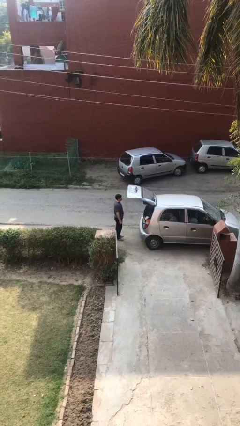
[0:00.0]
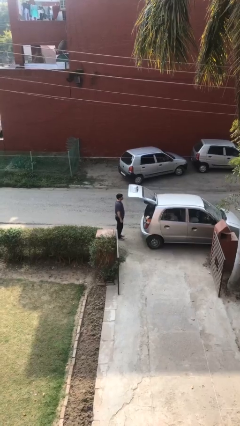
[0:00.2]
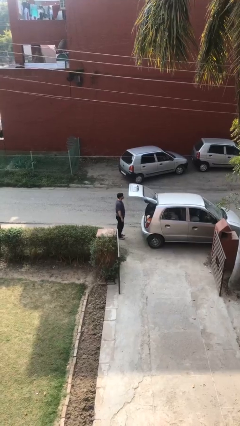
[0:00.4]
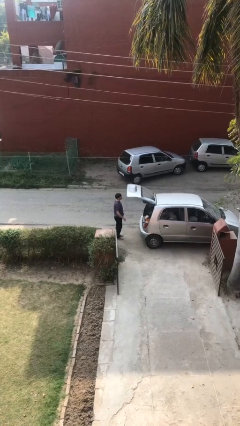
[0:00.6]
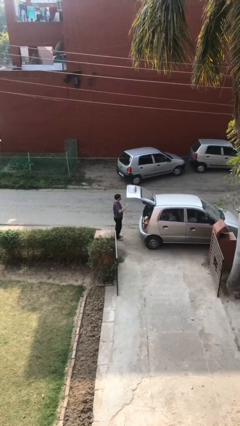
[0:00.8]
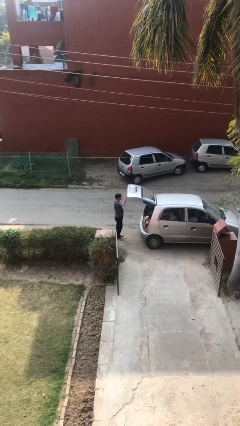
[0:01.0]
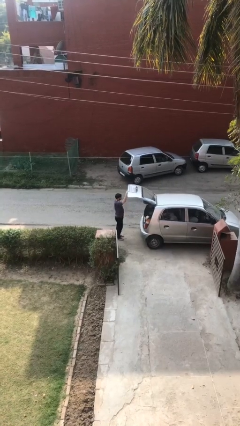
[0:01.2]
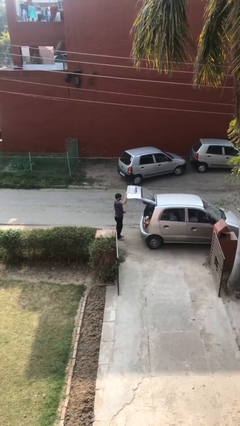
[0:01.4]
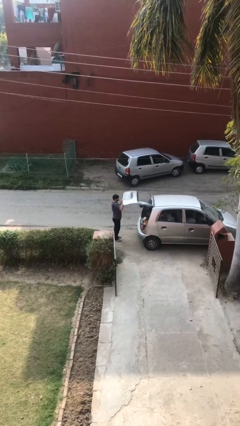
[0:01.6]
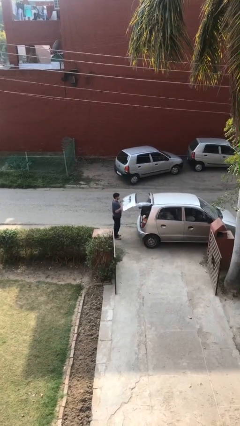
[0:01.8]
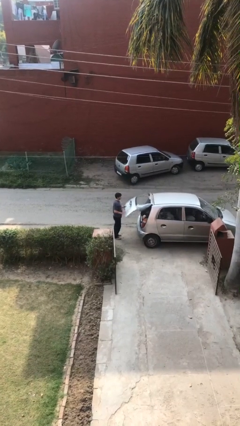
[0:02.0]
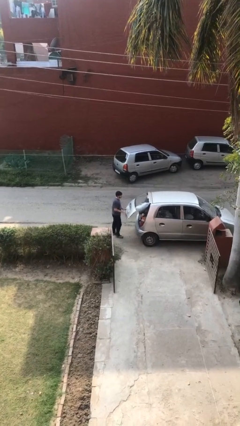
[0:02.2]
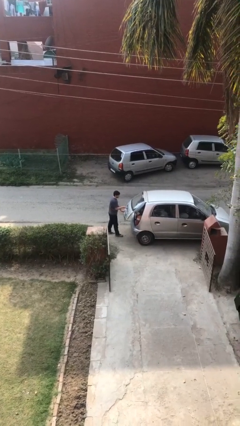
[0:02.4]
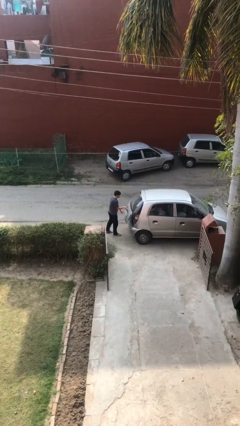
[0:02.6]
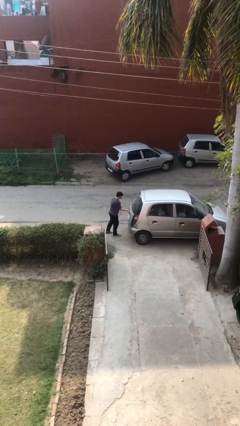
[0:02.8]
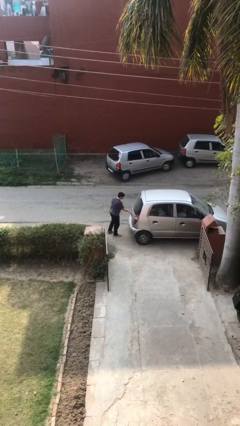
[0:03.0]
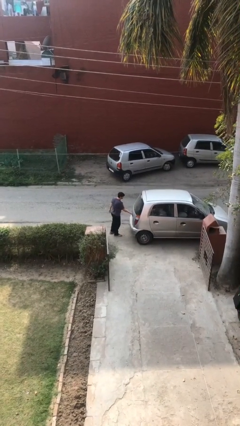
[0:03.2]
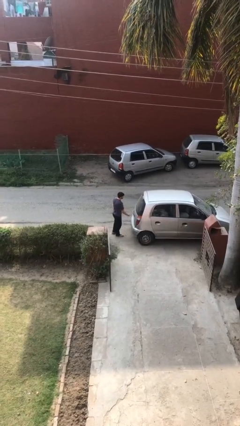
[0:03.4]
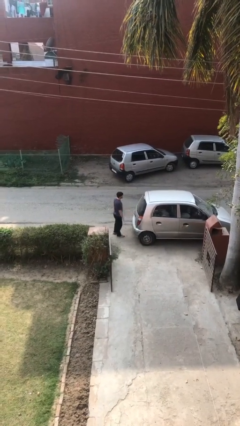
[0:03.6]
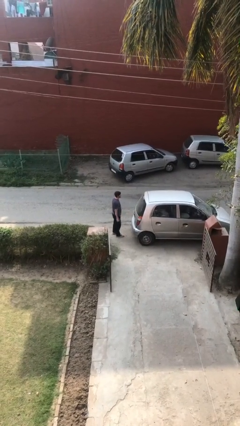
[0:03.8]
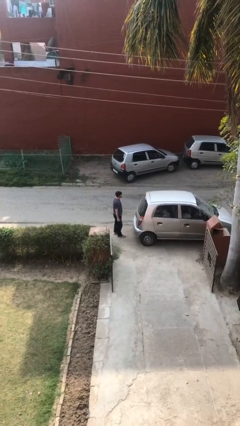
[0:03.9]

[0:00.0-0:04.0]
person closes car trunk

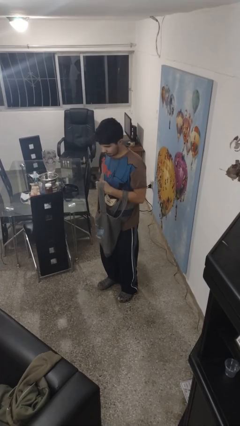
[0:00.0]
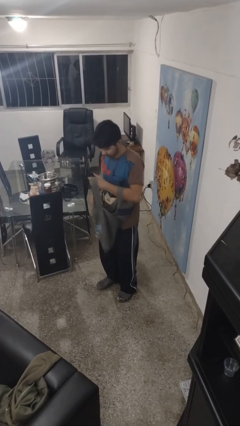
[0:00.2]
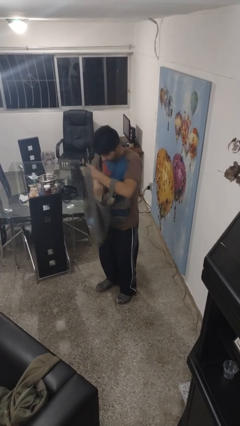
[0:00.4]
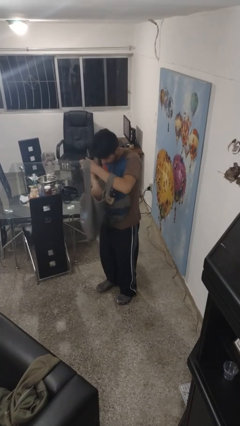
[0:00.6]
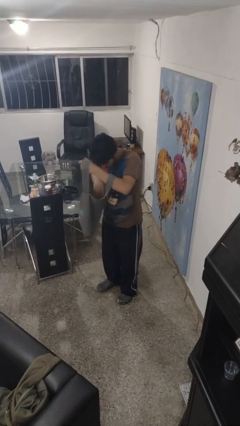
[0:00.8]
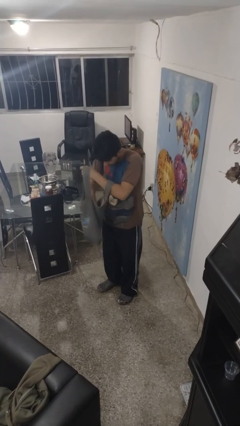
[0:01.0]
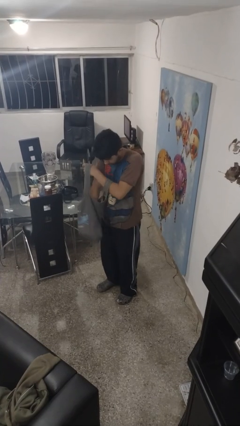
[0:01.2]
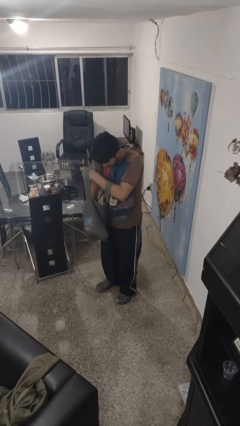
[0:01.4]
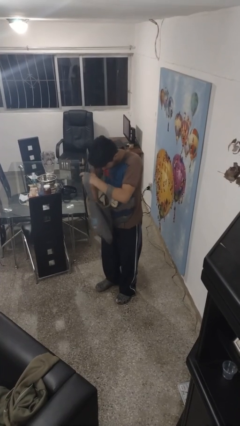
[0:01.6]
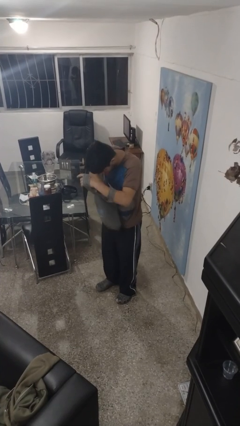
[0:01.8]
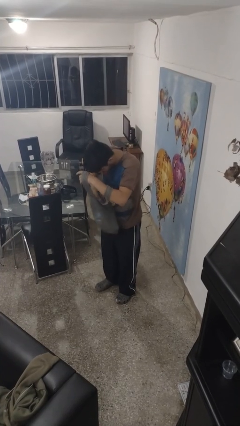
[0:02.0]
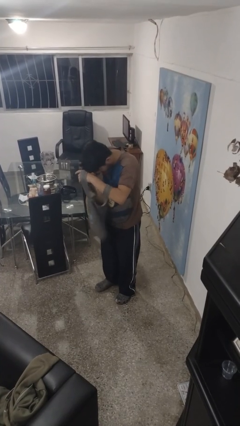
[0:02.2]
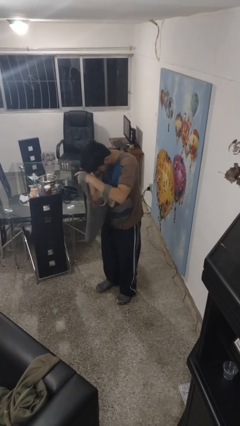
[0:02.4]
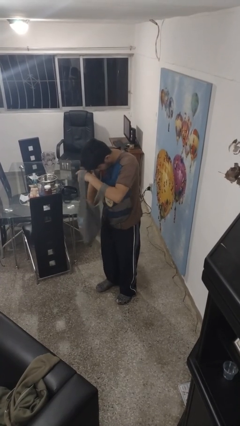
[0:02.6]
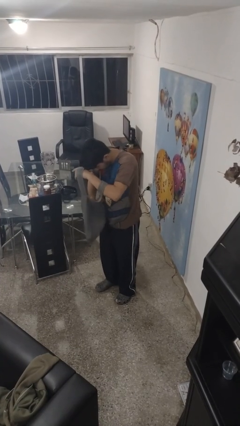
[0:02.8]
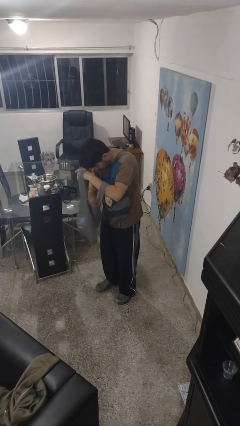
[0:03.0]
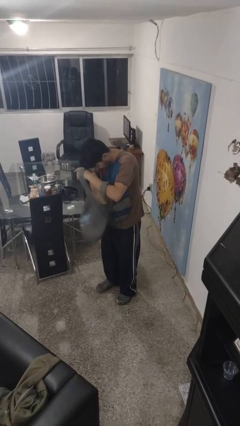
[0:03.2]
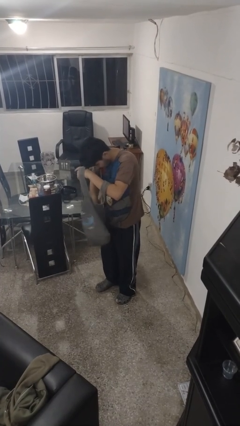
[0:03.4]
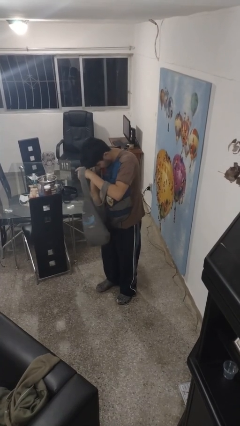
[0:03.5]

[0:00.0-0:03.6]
person searches in purse

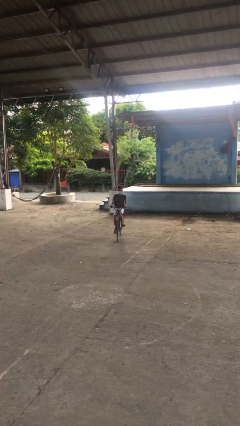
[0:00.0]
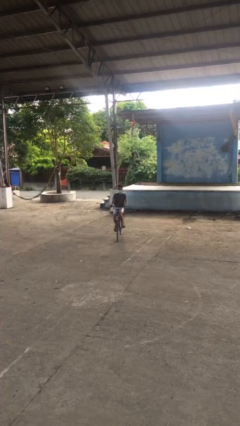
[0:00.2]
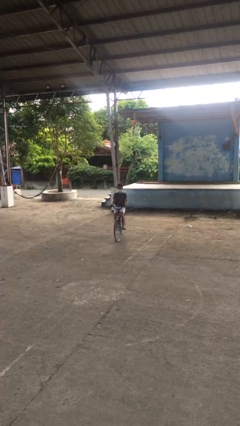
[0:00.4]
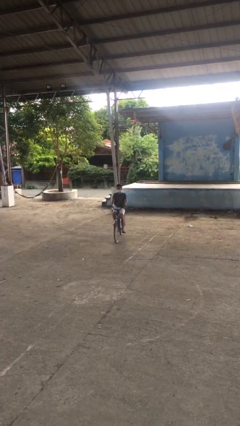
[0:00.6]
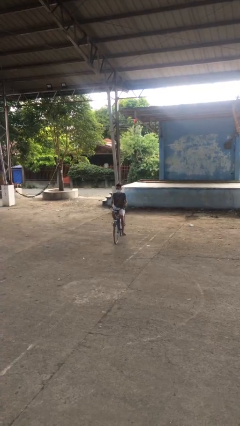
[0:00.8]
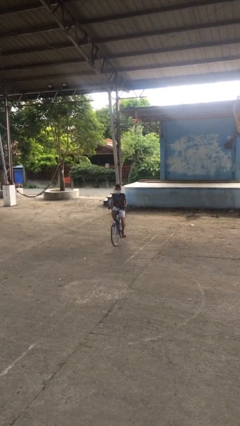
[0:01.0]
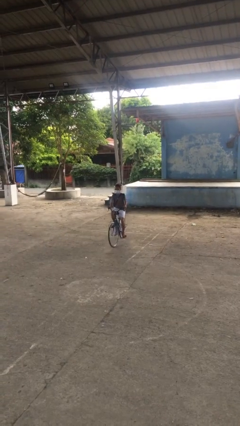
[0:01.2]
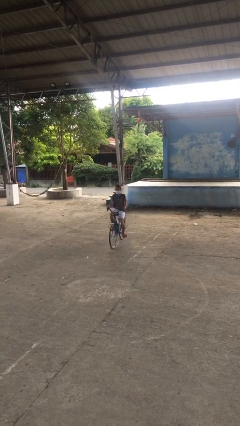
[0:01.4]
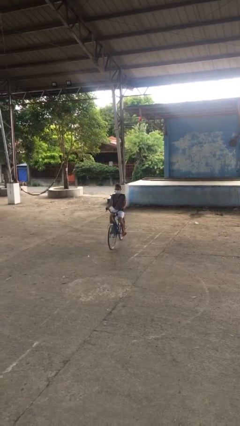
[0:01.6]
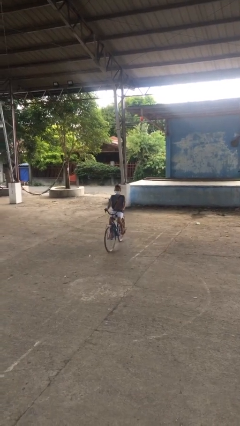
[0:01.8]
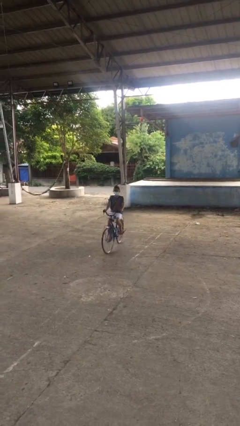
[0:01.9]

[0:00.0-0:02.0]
person rides bicycle

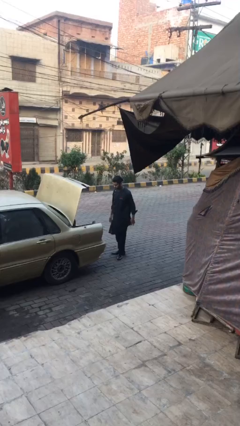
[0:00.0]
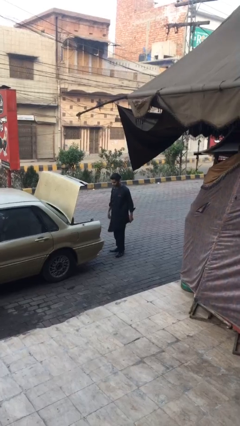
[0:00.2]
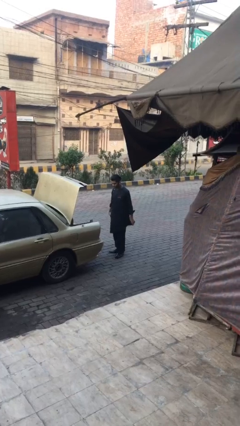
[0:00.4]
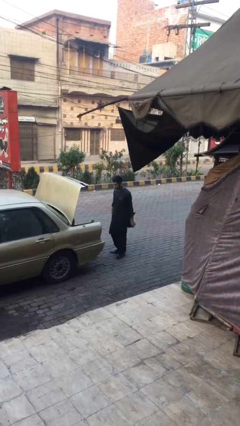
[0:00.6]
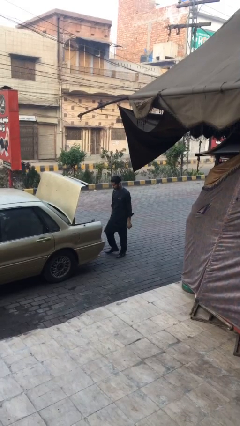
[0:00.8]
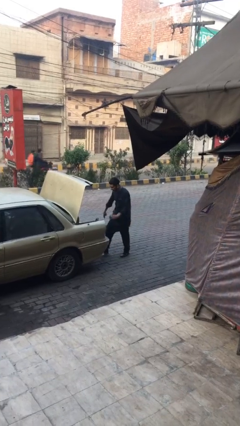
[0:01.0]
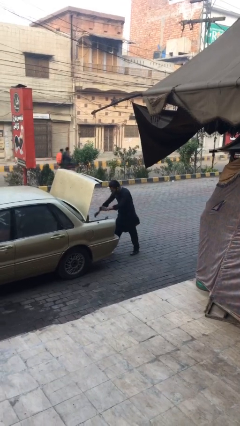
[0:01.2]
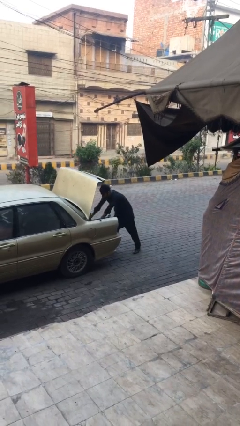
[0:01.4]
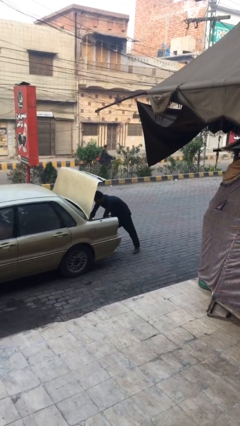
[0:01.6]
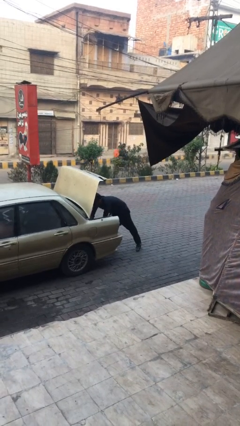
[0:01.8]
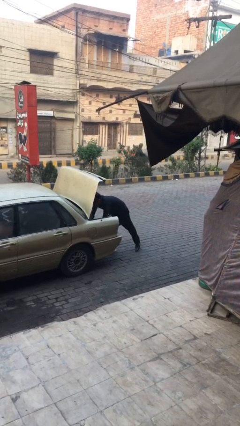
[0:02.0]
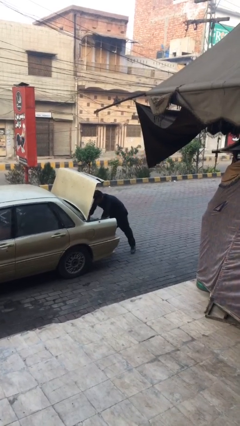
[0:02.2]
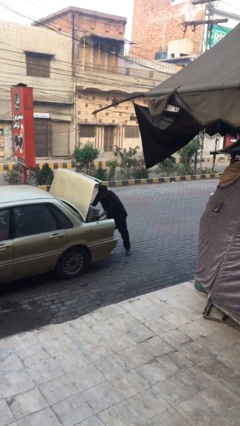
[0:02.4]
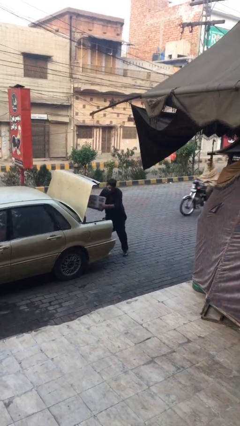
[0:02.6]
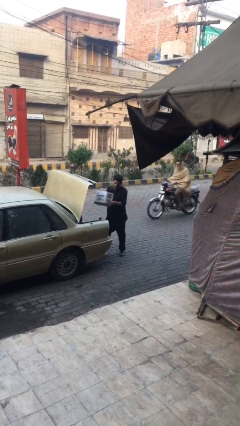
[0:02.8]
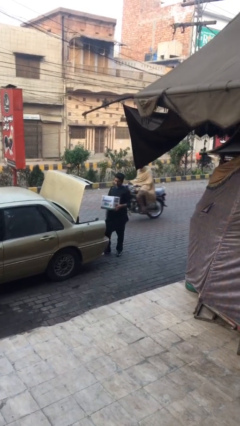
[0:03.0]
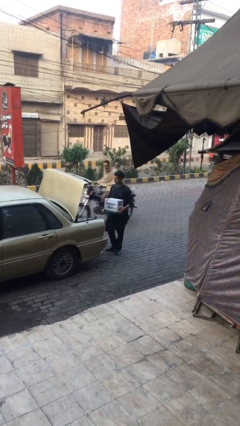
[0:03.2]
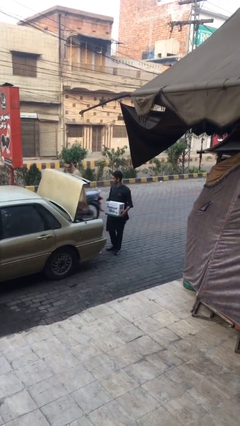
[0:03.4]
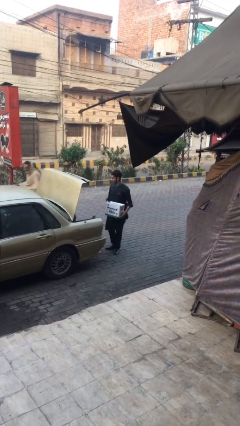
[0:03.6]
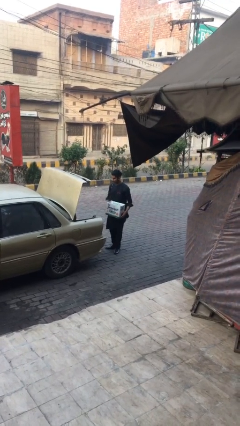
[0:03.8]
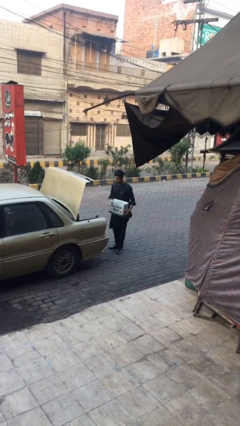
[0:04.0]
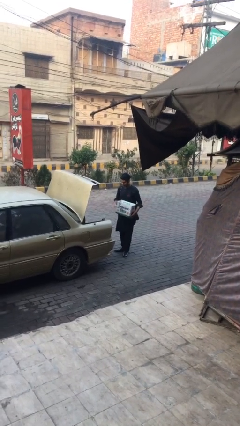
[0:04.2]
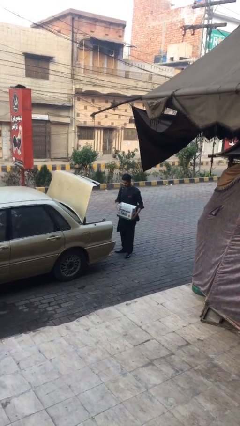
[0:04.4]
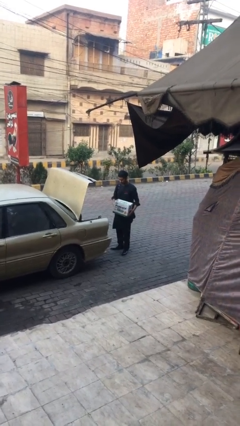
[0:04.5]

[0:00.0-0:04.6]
person unloads car

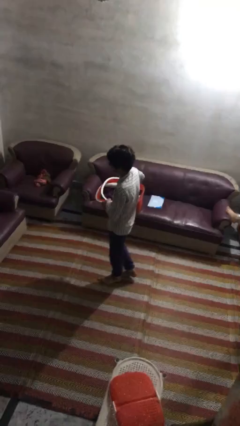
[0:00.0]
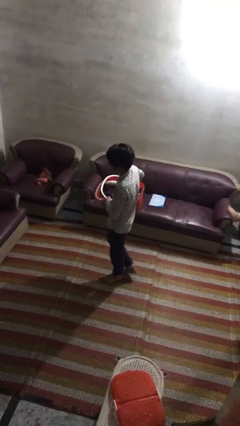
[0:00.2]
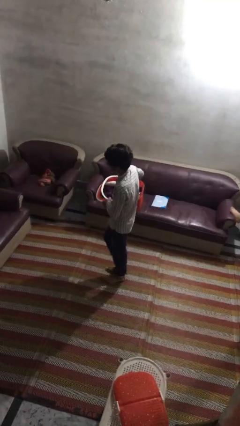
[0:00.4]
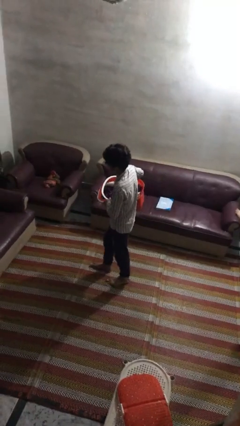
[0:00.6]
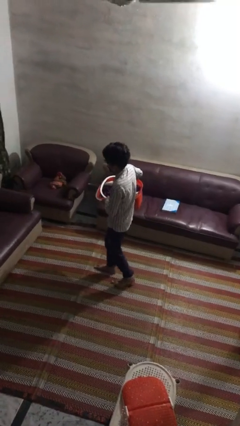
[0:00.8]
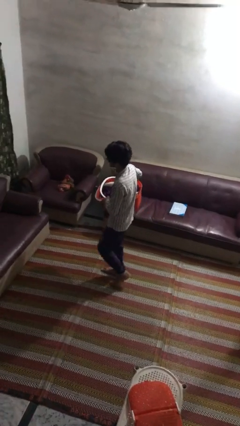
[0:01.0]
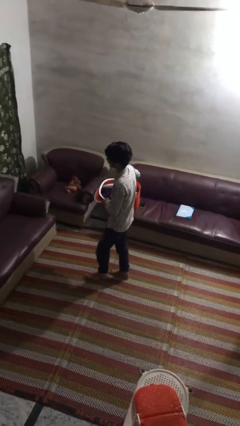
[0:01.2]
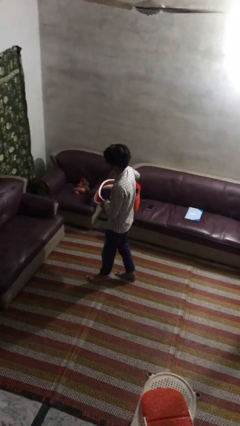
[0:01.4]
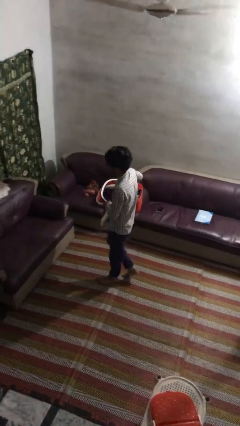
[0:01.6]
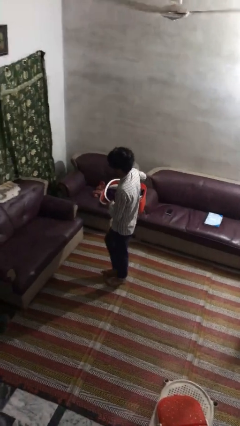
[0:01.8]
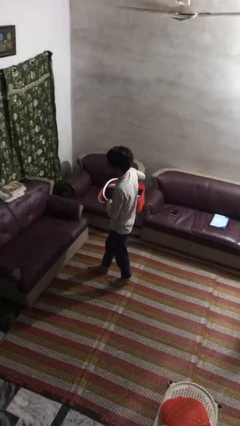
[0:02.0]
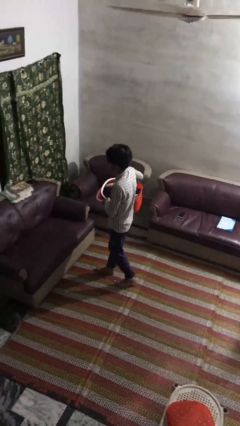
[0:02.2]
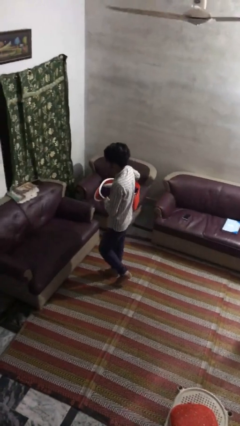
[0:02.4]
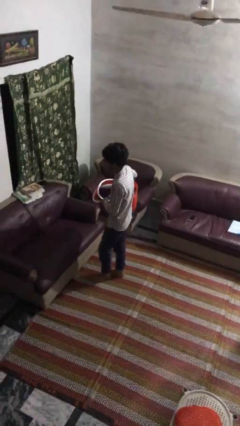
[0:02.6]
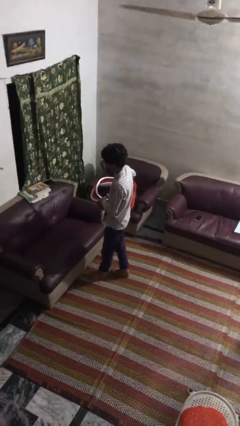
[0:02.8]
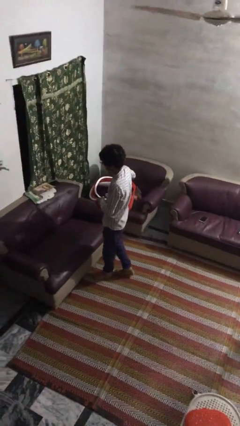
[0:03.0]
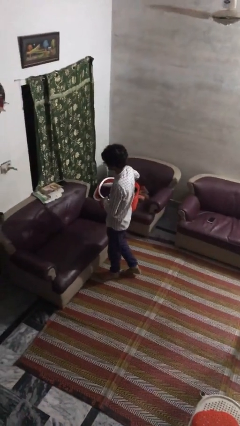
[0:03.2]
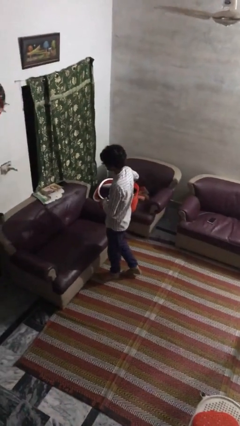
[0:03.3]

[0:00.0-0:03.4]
person carries laundry basket
